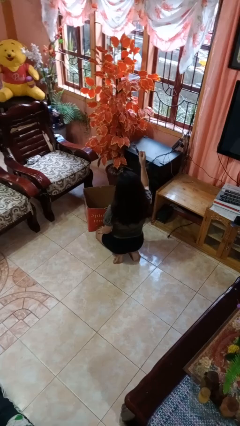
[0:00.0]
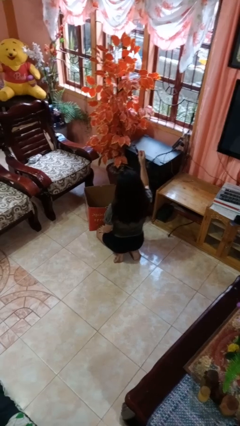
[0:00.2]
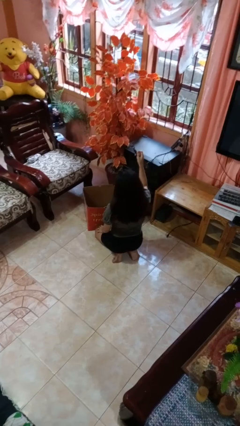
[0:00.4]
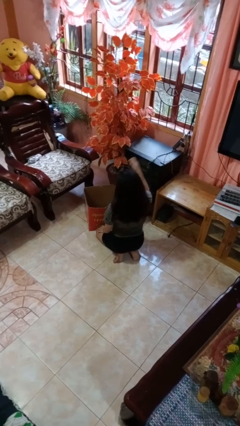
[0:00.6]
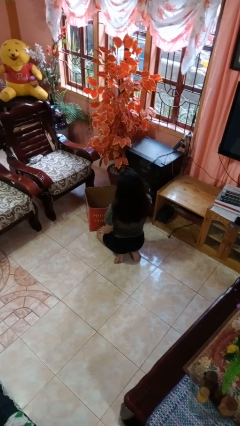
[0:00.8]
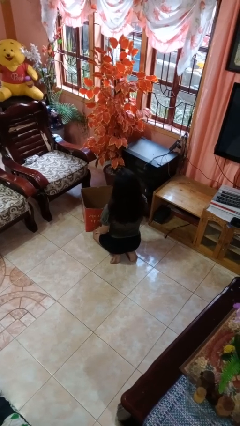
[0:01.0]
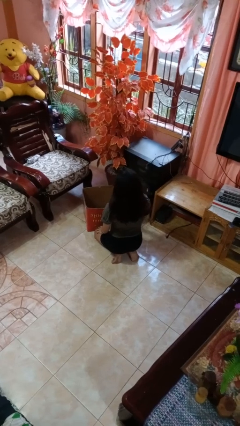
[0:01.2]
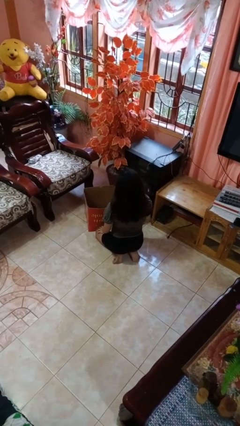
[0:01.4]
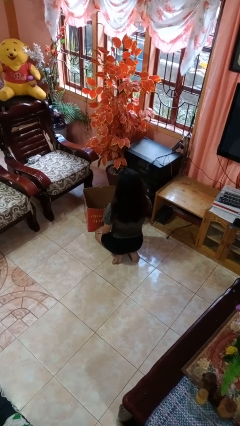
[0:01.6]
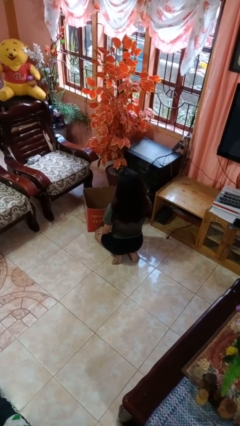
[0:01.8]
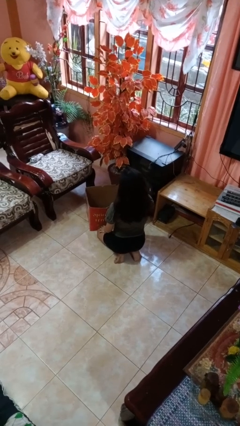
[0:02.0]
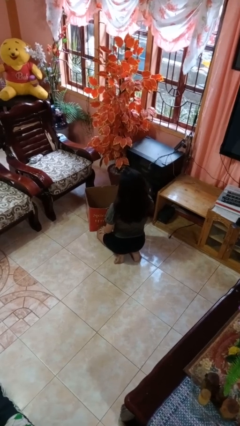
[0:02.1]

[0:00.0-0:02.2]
person puts object into box

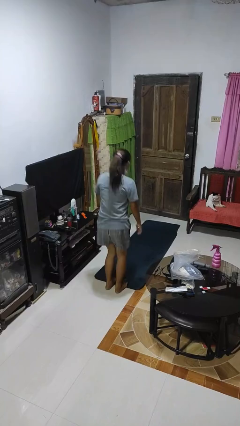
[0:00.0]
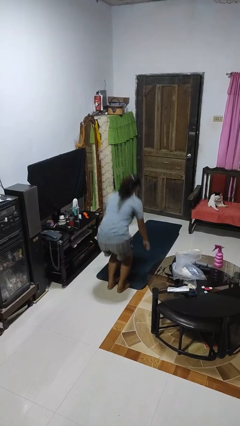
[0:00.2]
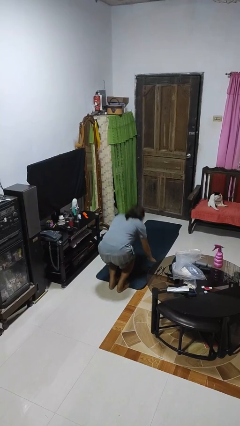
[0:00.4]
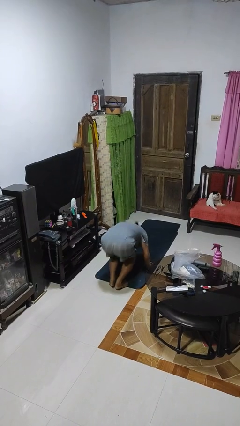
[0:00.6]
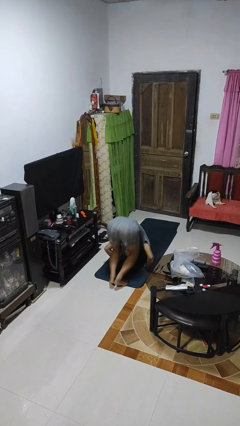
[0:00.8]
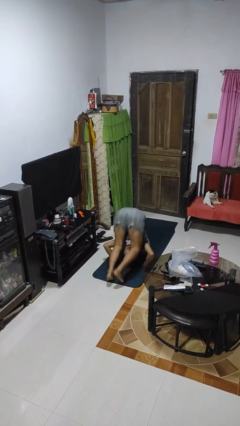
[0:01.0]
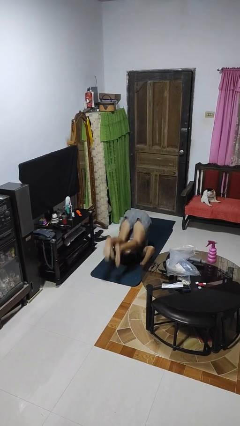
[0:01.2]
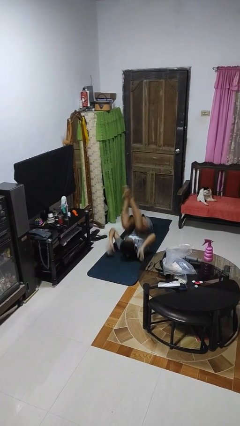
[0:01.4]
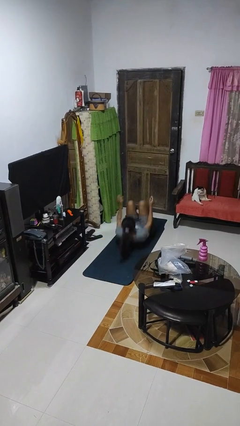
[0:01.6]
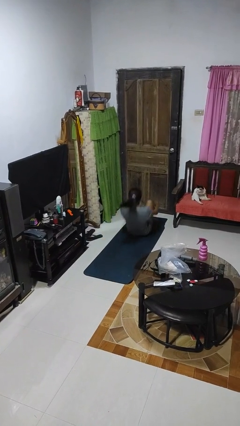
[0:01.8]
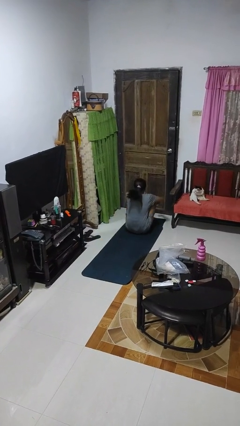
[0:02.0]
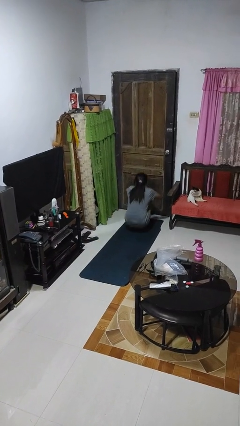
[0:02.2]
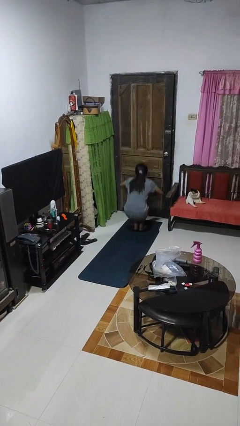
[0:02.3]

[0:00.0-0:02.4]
person somersaults

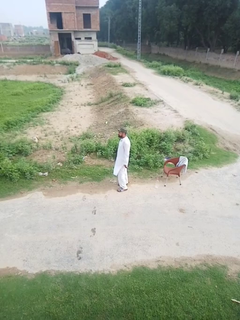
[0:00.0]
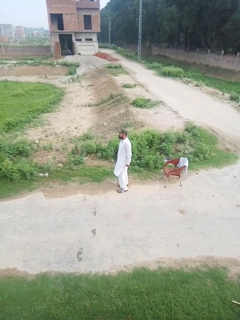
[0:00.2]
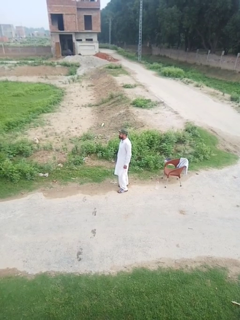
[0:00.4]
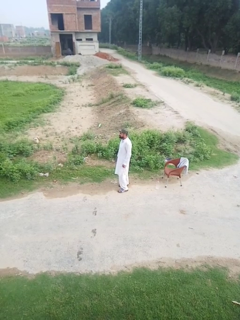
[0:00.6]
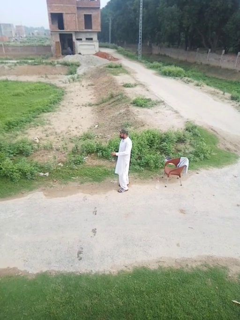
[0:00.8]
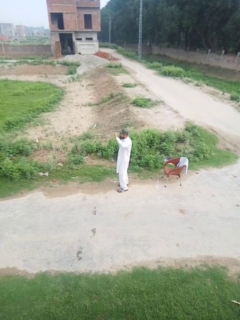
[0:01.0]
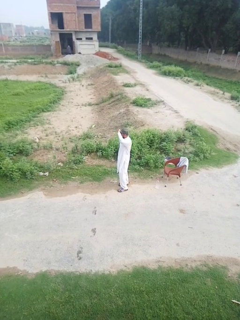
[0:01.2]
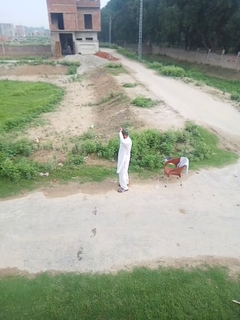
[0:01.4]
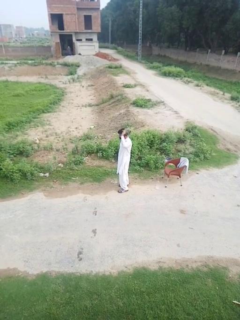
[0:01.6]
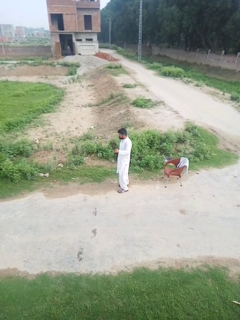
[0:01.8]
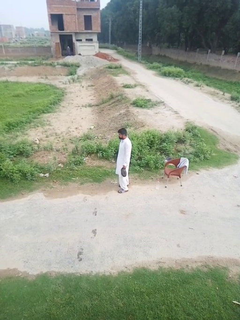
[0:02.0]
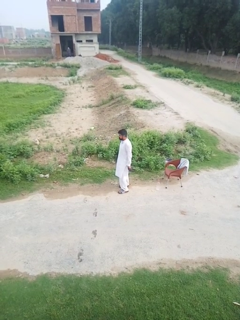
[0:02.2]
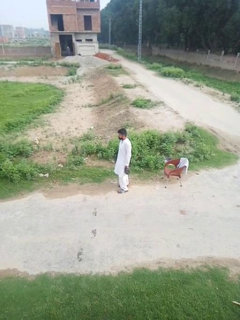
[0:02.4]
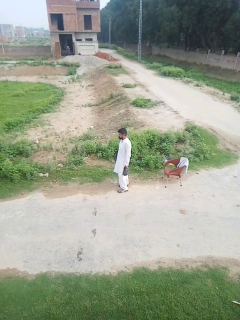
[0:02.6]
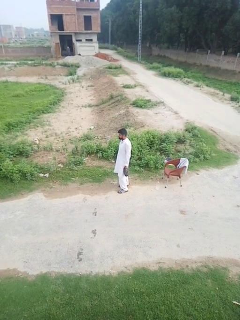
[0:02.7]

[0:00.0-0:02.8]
person takes off hat

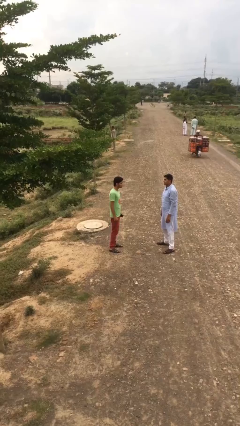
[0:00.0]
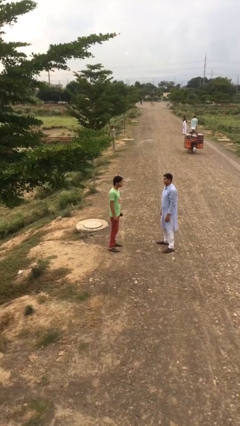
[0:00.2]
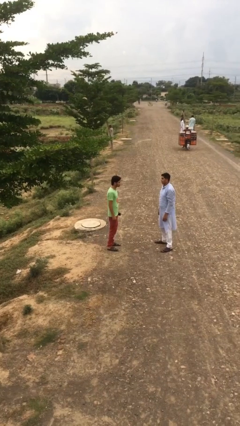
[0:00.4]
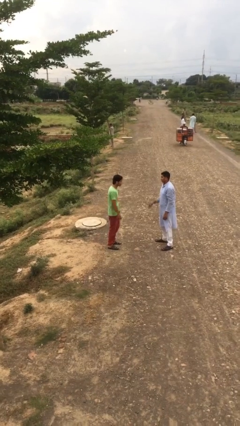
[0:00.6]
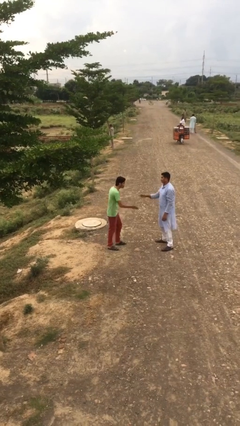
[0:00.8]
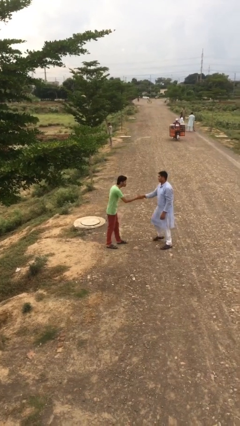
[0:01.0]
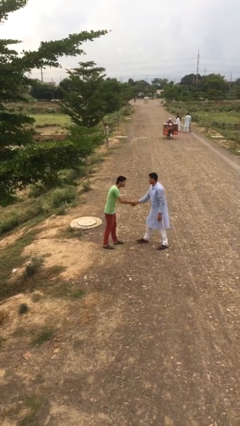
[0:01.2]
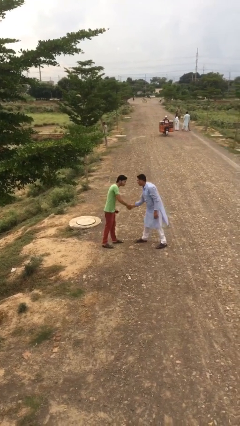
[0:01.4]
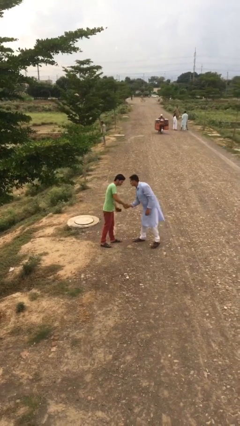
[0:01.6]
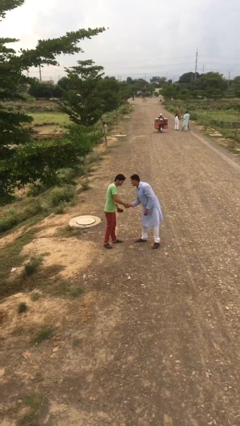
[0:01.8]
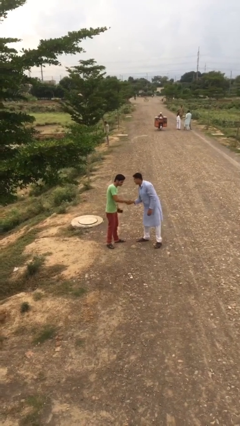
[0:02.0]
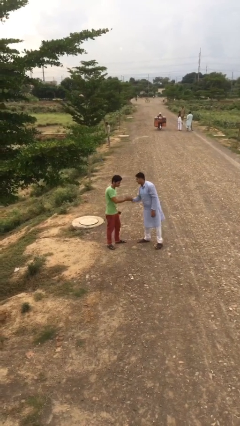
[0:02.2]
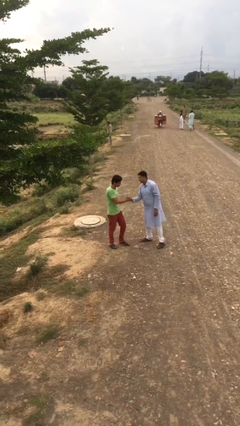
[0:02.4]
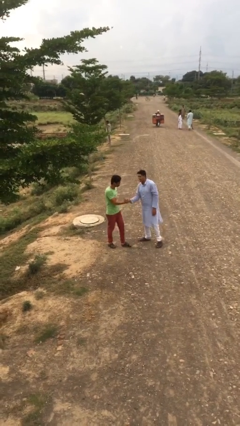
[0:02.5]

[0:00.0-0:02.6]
person shakes hand

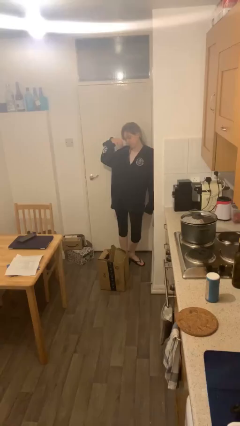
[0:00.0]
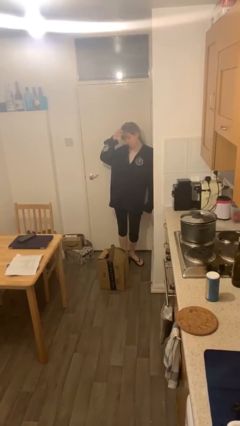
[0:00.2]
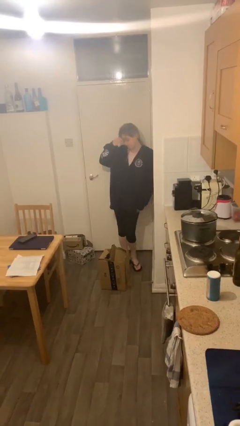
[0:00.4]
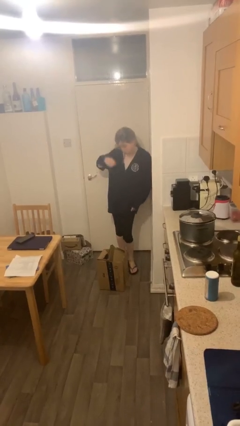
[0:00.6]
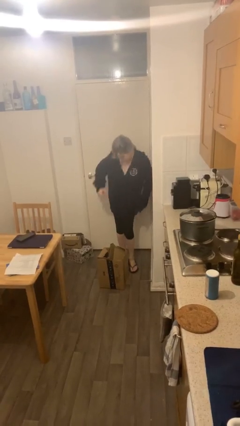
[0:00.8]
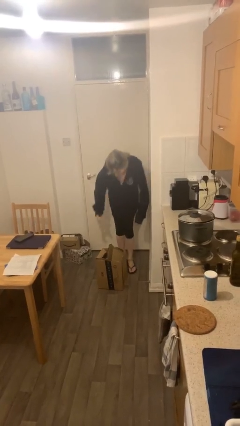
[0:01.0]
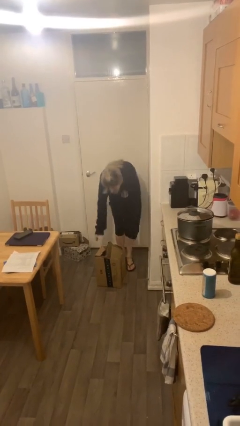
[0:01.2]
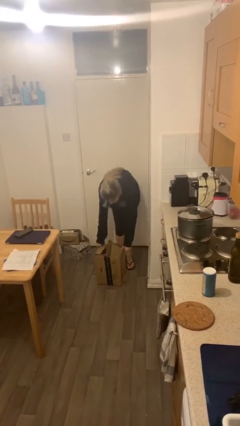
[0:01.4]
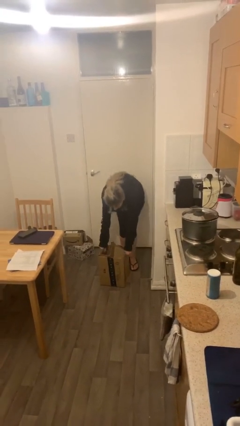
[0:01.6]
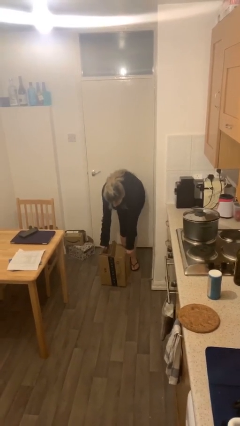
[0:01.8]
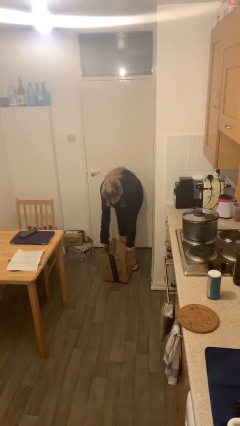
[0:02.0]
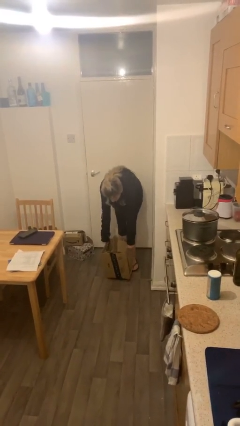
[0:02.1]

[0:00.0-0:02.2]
person picks up object from floor

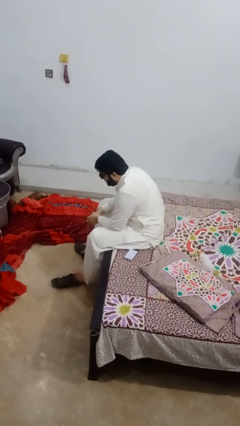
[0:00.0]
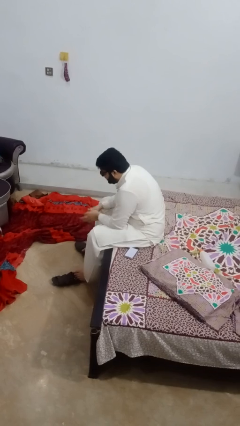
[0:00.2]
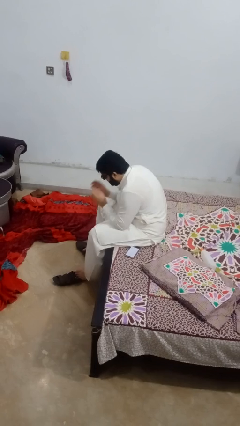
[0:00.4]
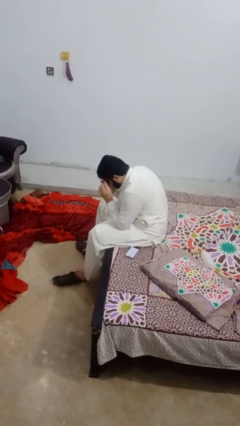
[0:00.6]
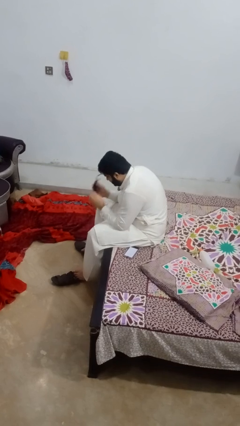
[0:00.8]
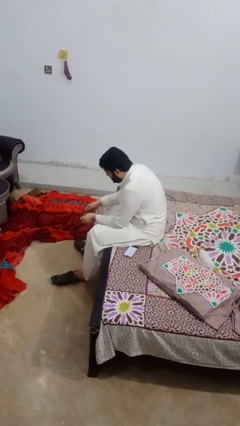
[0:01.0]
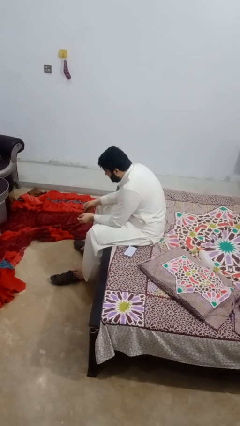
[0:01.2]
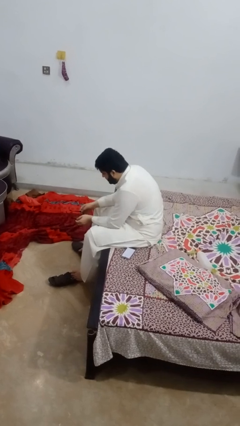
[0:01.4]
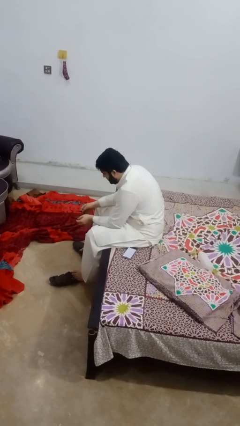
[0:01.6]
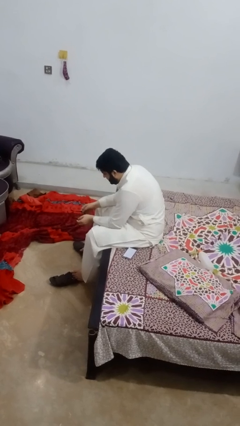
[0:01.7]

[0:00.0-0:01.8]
person takes off glasses

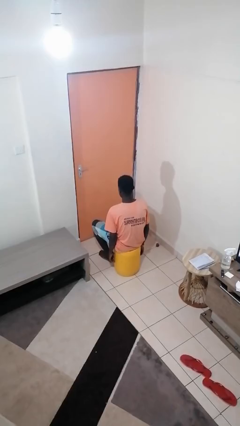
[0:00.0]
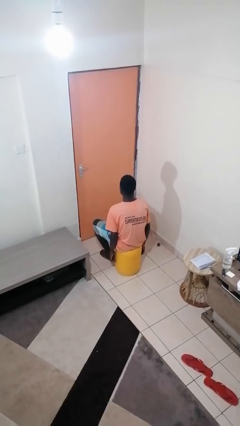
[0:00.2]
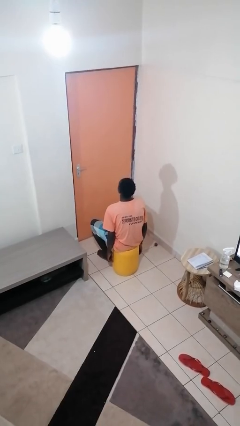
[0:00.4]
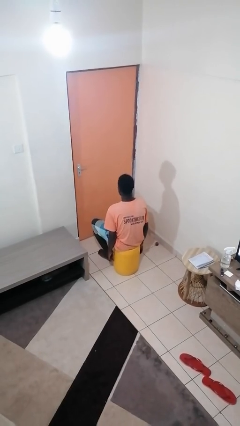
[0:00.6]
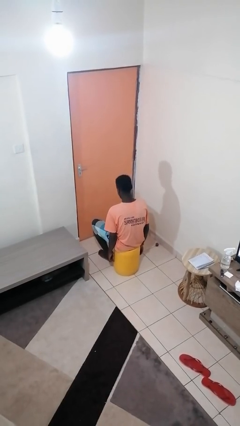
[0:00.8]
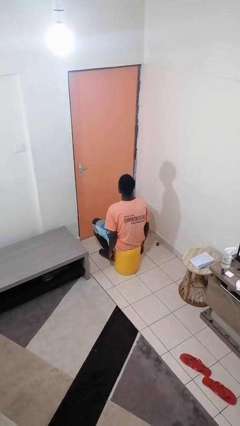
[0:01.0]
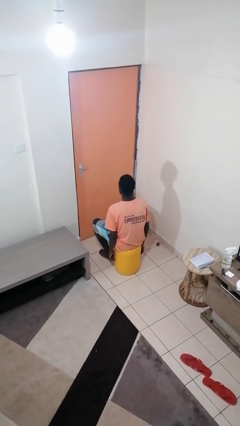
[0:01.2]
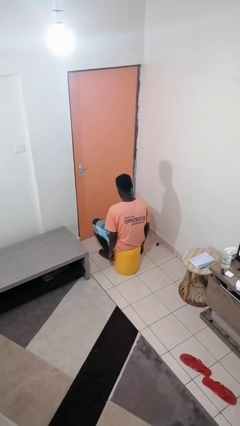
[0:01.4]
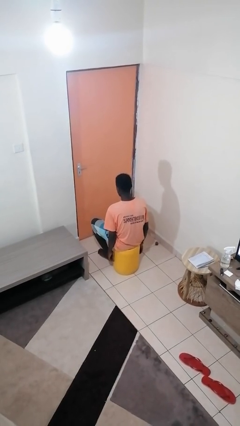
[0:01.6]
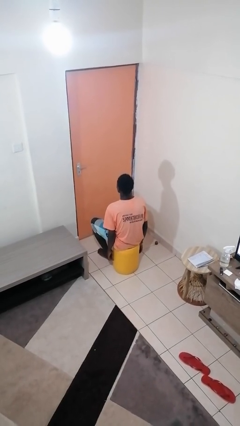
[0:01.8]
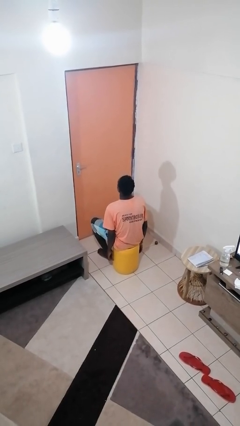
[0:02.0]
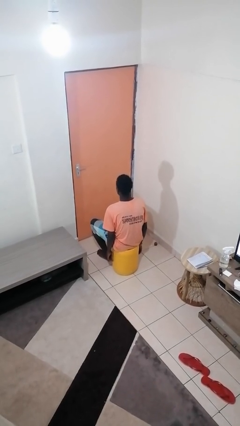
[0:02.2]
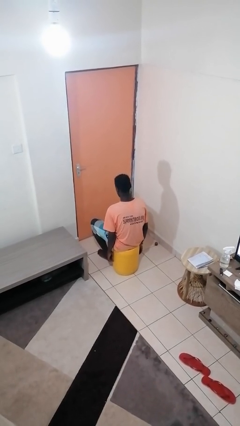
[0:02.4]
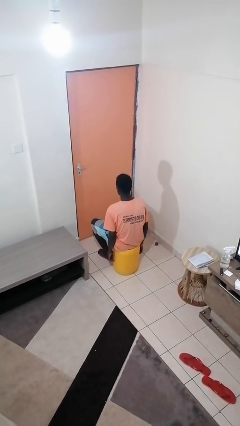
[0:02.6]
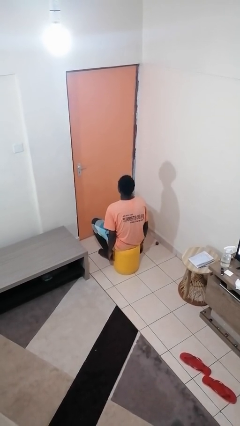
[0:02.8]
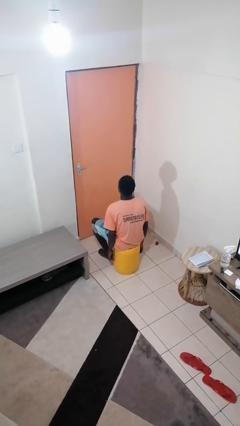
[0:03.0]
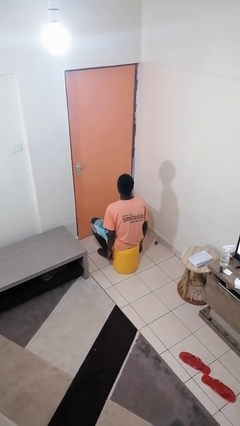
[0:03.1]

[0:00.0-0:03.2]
person nods head

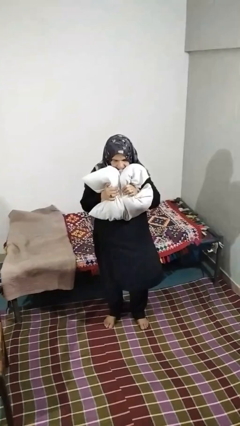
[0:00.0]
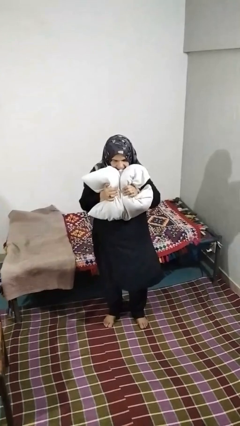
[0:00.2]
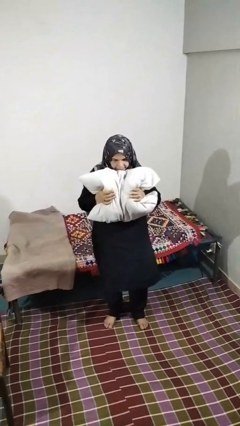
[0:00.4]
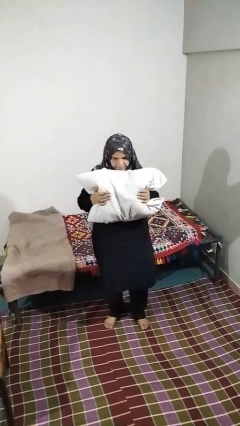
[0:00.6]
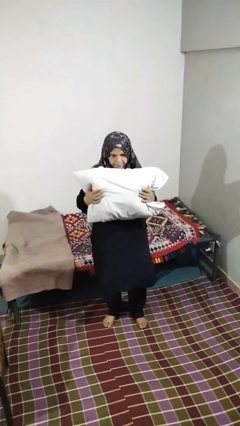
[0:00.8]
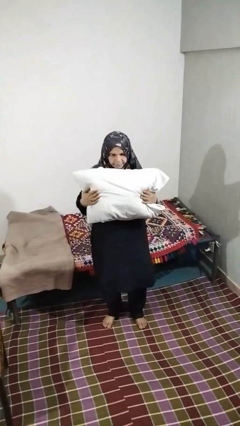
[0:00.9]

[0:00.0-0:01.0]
person squeezes object
